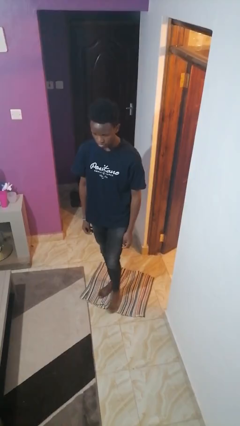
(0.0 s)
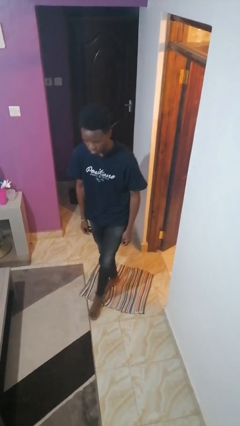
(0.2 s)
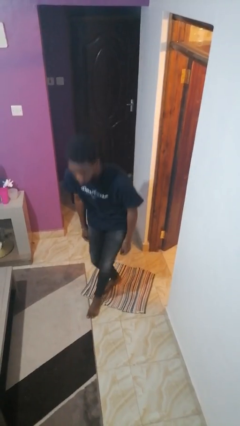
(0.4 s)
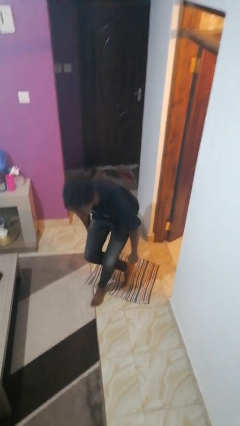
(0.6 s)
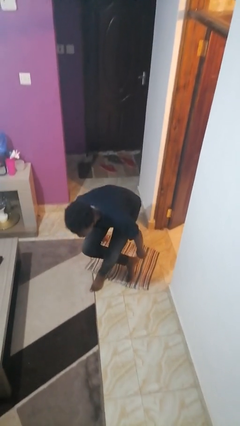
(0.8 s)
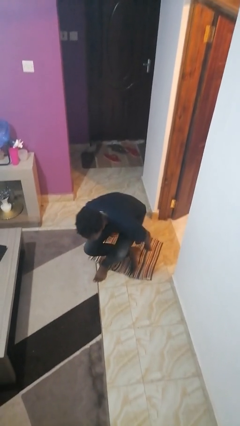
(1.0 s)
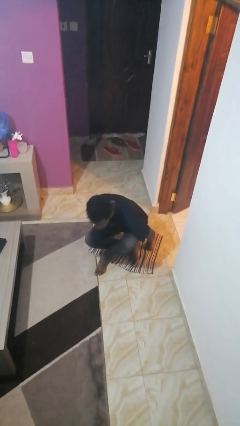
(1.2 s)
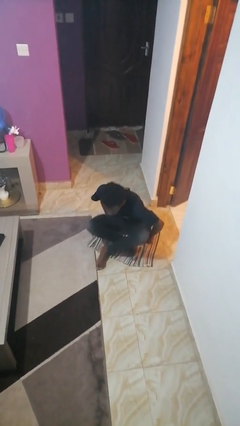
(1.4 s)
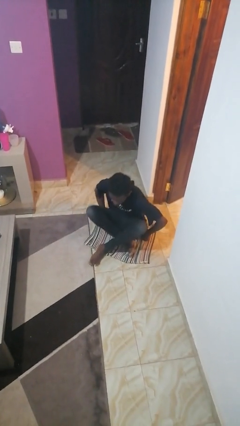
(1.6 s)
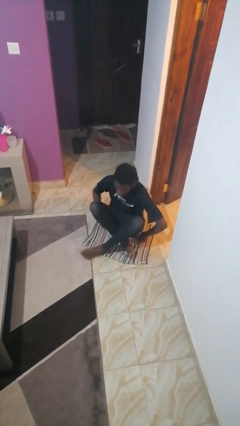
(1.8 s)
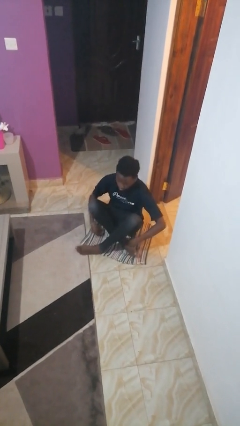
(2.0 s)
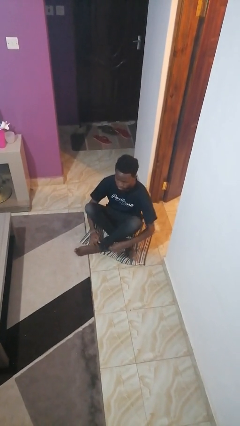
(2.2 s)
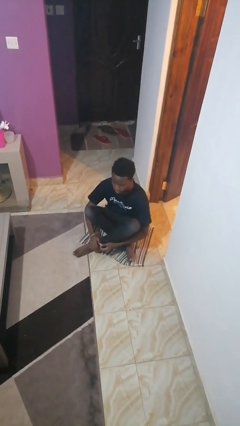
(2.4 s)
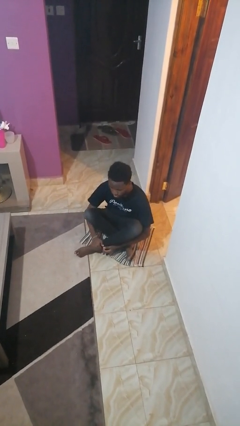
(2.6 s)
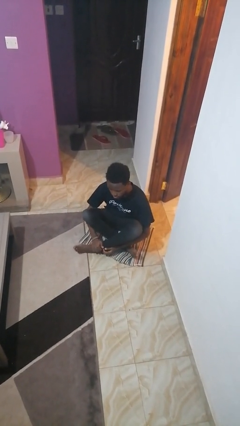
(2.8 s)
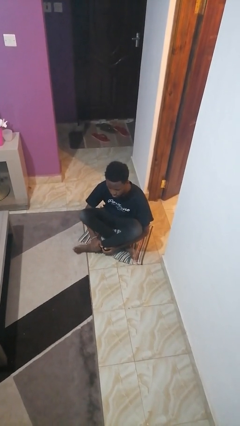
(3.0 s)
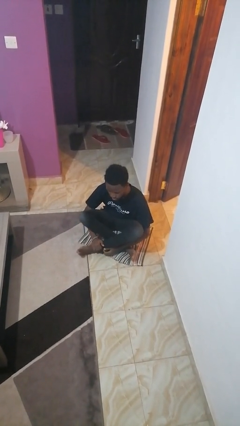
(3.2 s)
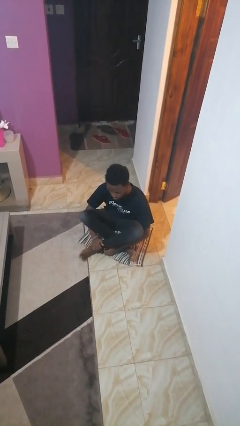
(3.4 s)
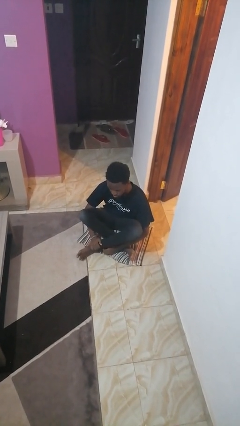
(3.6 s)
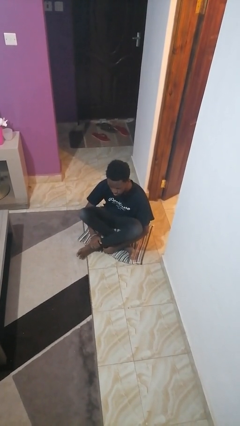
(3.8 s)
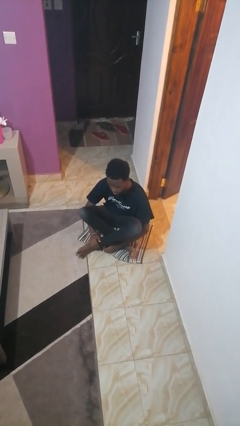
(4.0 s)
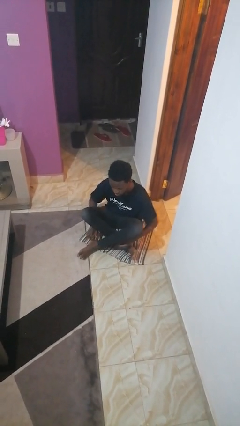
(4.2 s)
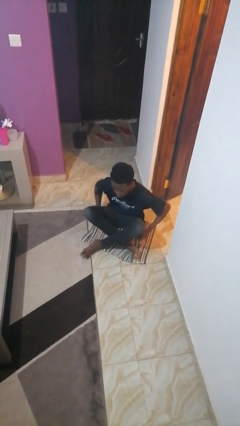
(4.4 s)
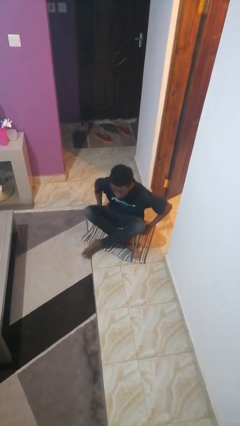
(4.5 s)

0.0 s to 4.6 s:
person sits crisscross

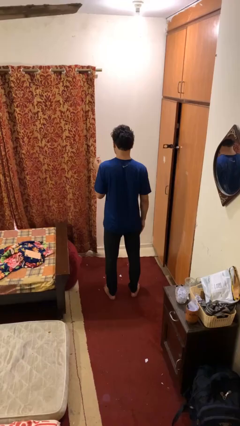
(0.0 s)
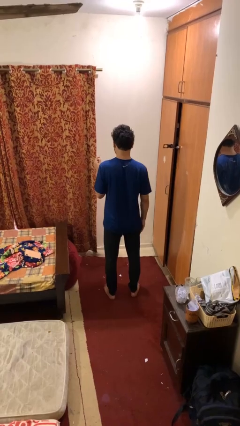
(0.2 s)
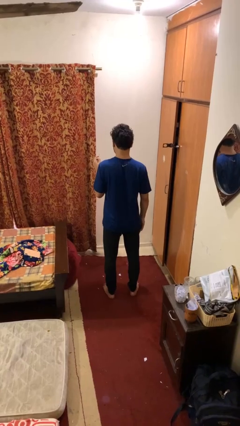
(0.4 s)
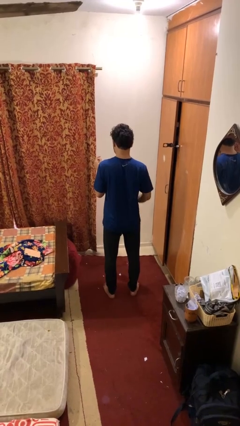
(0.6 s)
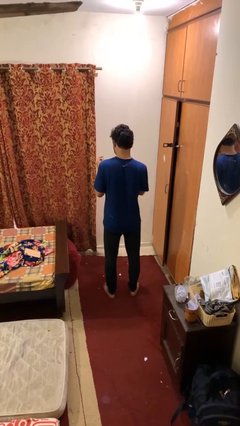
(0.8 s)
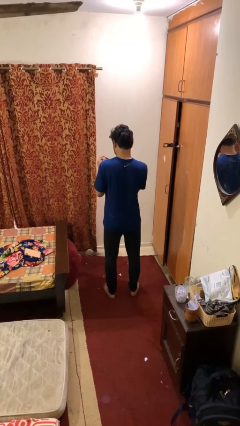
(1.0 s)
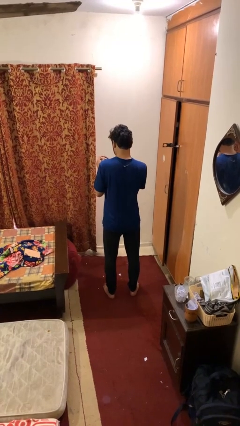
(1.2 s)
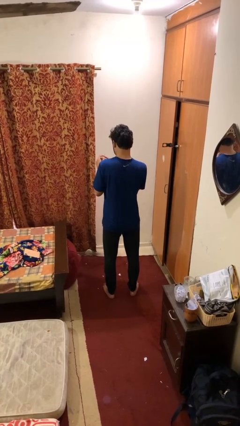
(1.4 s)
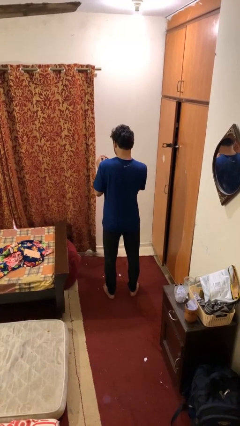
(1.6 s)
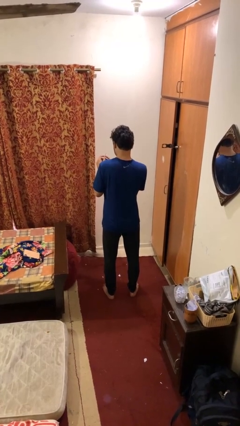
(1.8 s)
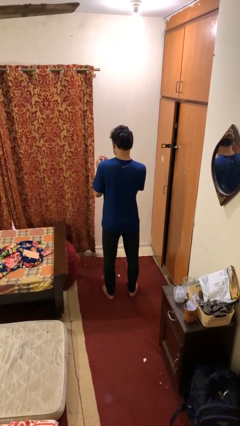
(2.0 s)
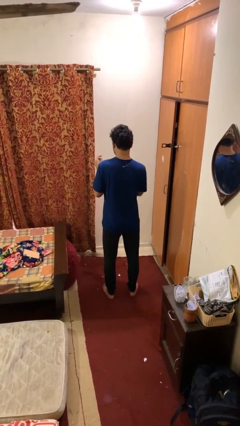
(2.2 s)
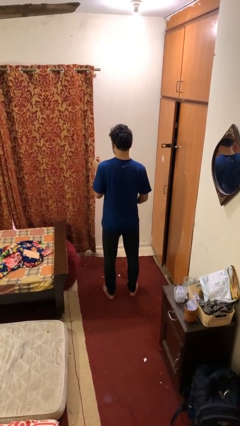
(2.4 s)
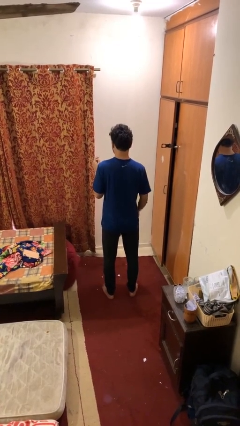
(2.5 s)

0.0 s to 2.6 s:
person files fingernails

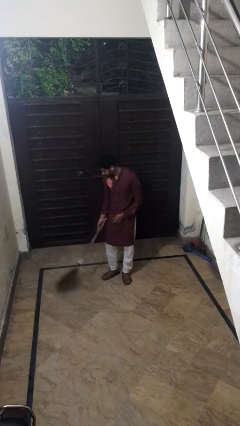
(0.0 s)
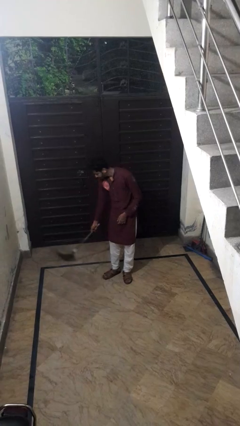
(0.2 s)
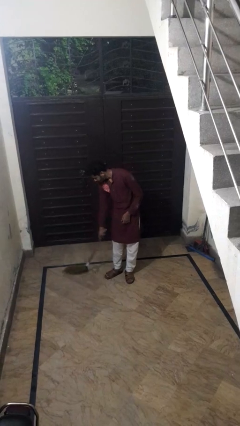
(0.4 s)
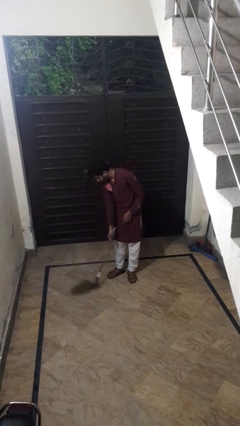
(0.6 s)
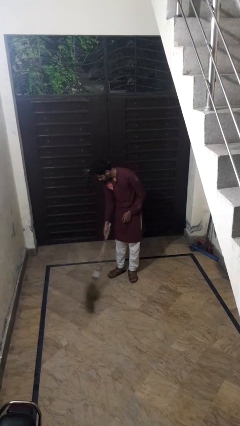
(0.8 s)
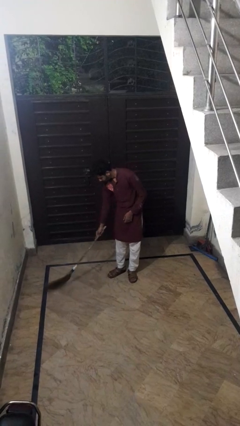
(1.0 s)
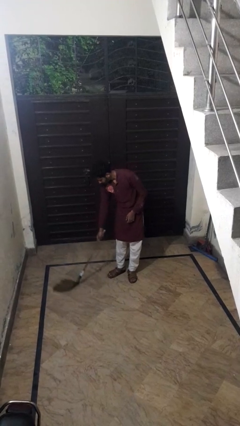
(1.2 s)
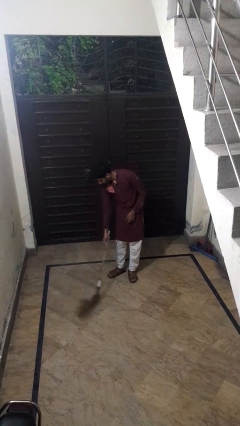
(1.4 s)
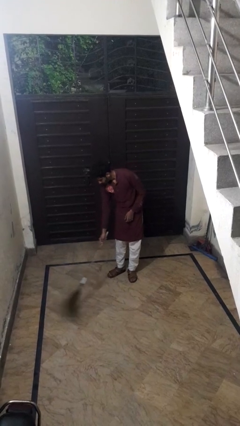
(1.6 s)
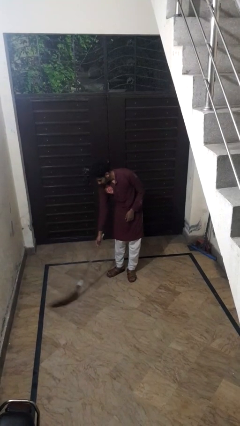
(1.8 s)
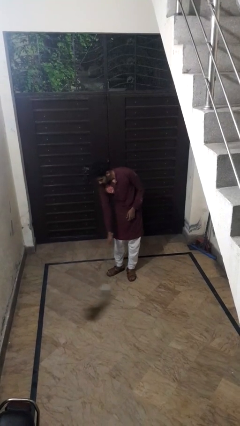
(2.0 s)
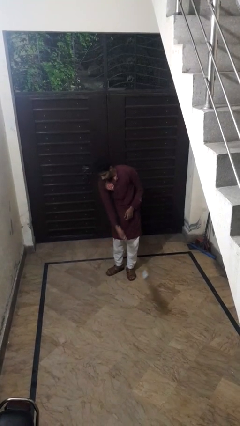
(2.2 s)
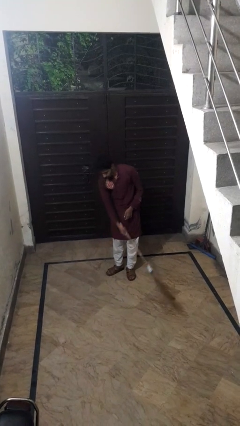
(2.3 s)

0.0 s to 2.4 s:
person sweeps floor

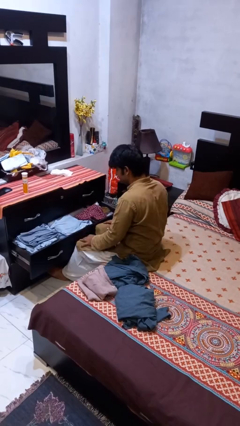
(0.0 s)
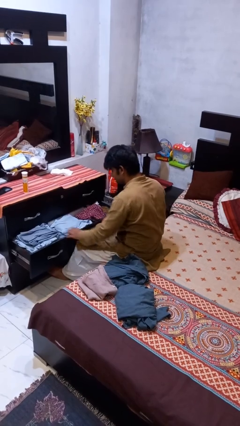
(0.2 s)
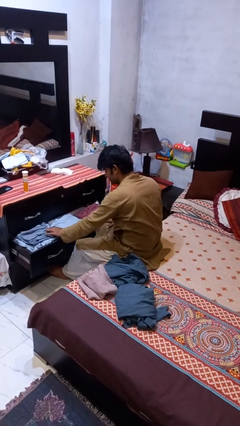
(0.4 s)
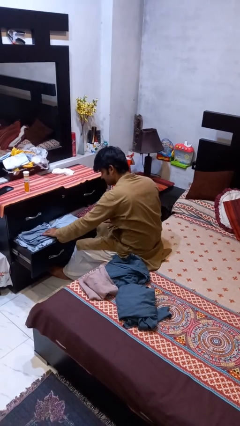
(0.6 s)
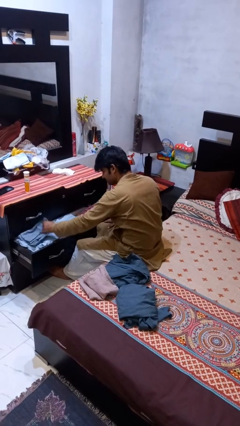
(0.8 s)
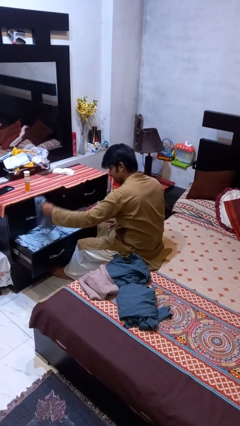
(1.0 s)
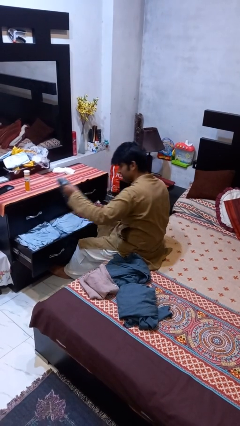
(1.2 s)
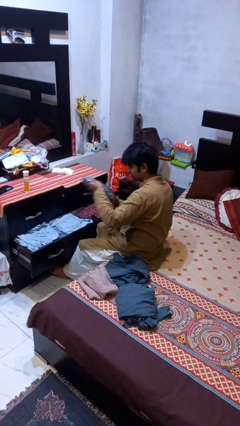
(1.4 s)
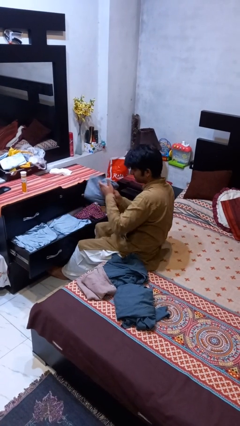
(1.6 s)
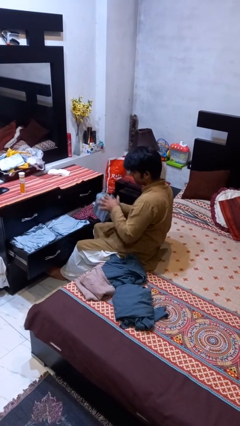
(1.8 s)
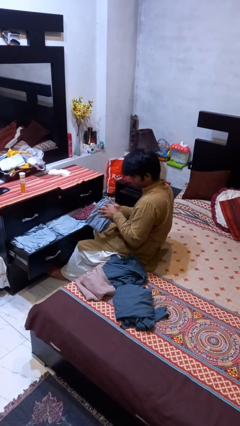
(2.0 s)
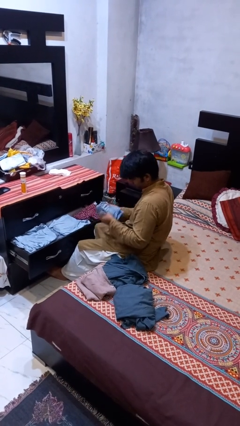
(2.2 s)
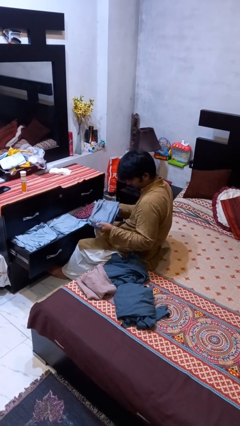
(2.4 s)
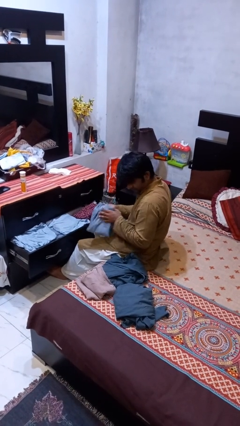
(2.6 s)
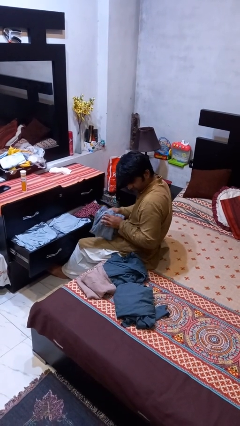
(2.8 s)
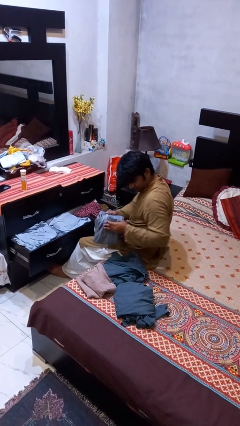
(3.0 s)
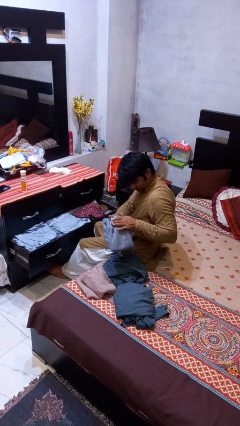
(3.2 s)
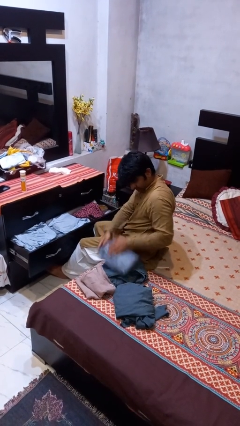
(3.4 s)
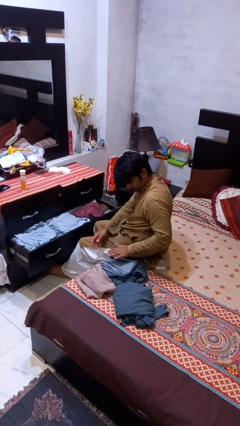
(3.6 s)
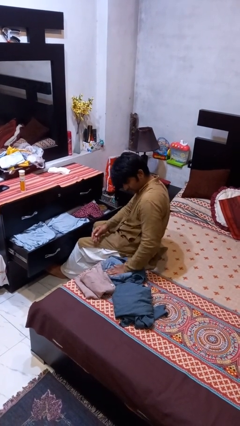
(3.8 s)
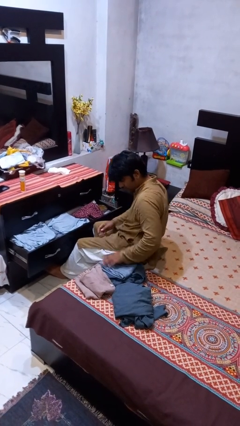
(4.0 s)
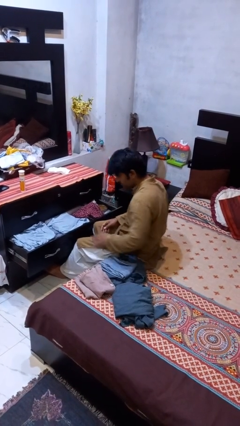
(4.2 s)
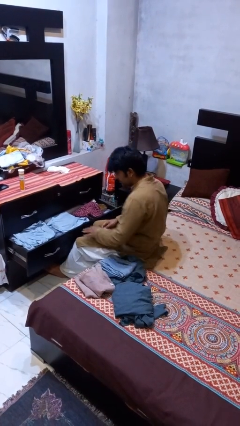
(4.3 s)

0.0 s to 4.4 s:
person takes clothes from dresser

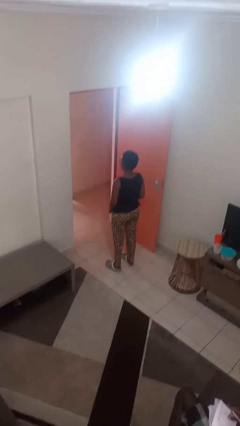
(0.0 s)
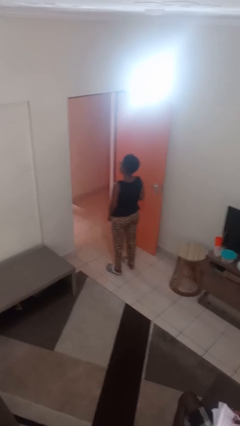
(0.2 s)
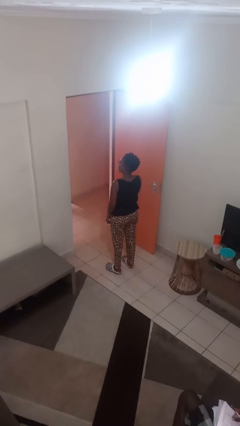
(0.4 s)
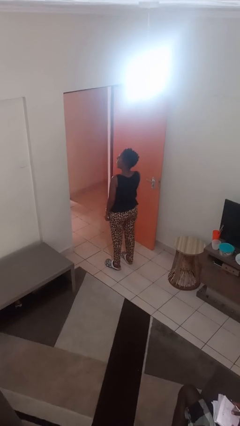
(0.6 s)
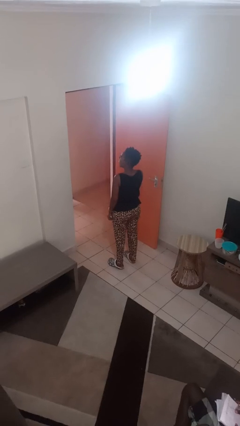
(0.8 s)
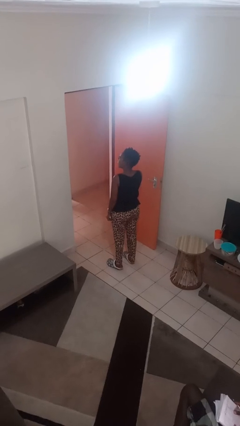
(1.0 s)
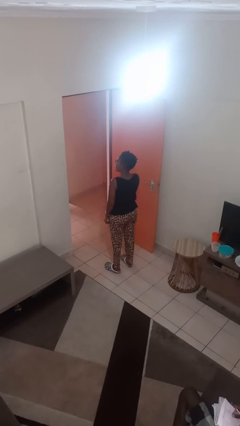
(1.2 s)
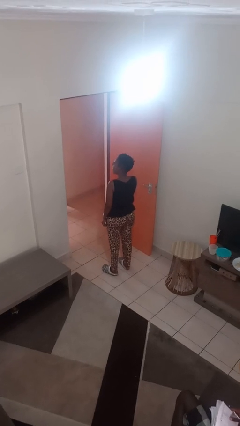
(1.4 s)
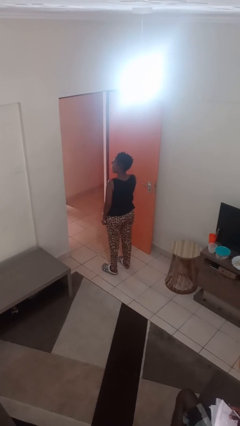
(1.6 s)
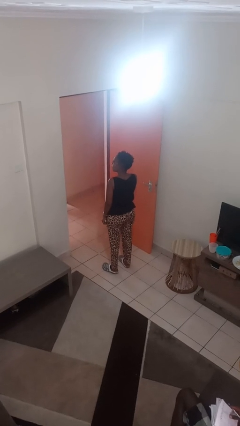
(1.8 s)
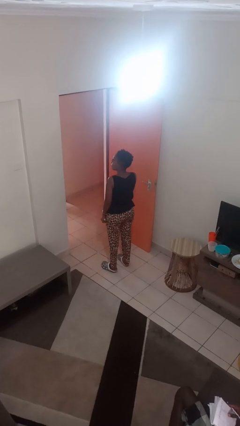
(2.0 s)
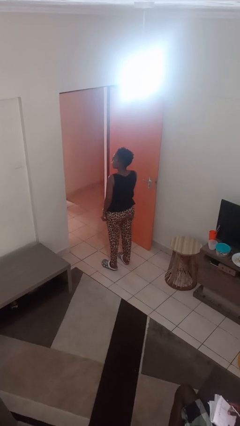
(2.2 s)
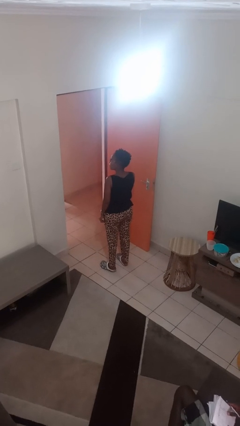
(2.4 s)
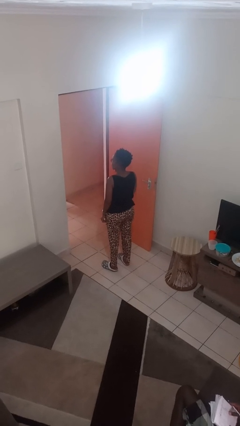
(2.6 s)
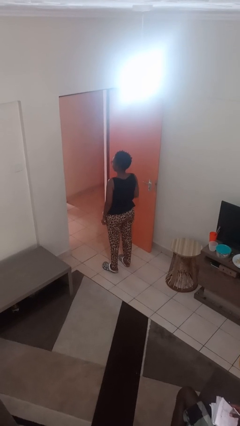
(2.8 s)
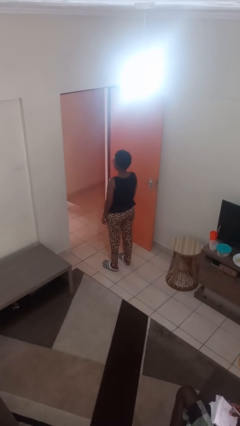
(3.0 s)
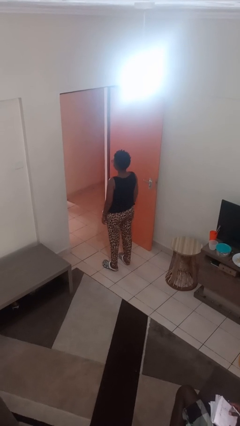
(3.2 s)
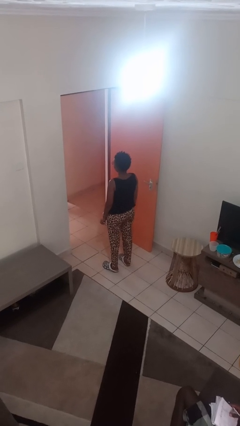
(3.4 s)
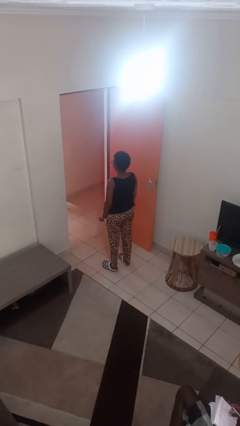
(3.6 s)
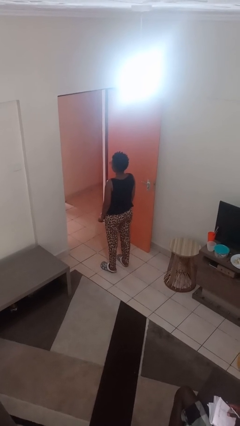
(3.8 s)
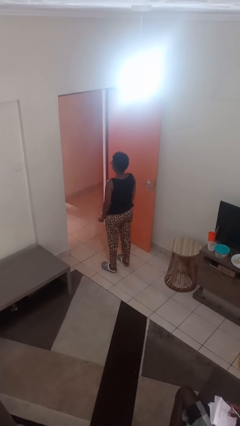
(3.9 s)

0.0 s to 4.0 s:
person puts on earrings
